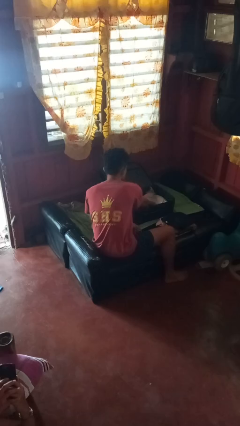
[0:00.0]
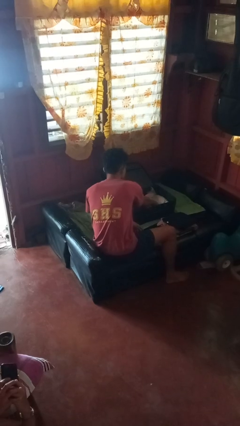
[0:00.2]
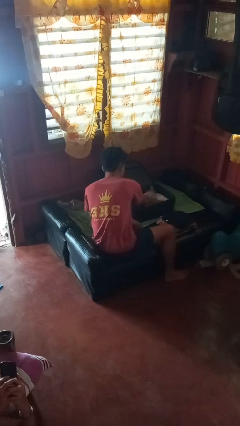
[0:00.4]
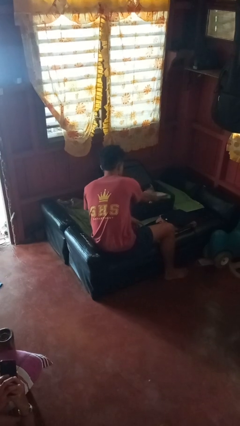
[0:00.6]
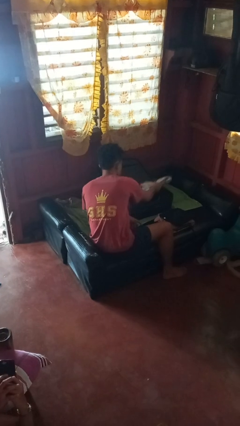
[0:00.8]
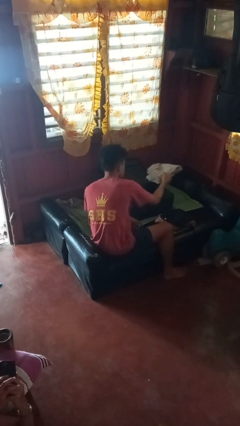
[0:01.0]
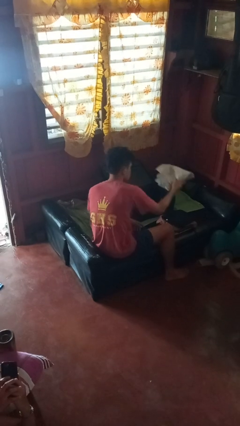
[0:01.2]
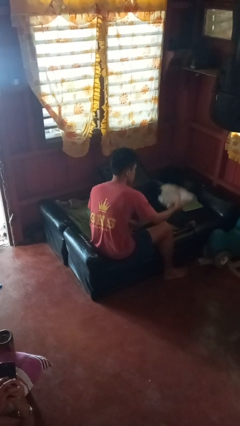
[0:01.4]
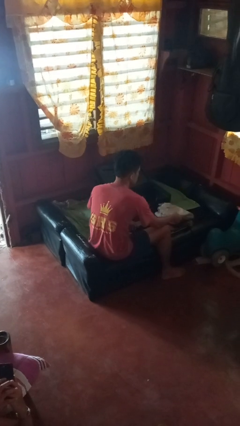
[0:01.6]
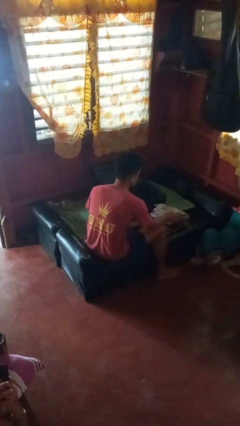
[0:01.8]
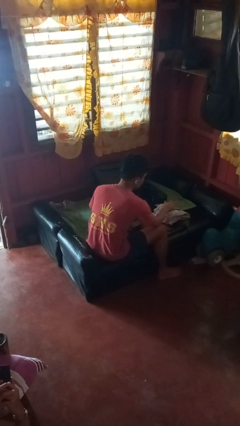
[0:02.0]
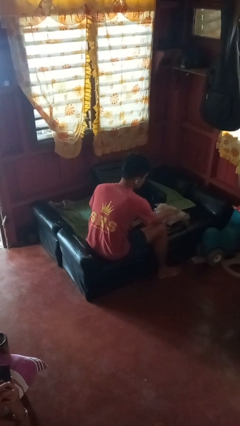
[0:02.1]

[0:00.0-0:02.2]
person unloads clothes from suitcase

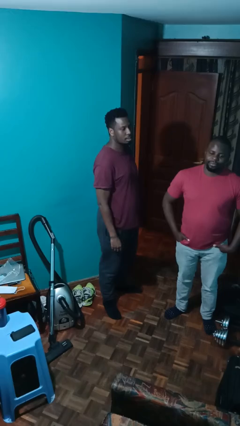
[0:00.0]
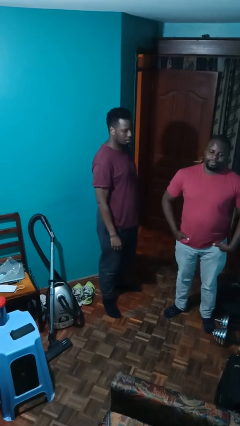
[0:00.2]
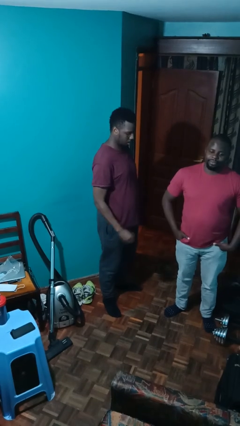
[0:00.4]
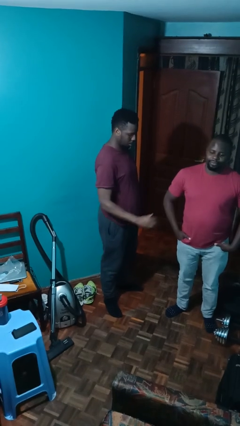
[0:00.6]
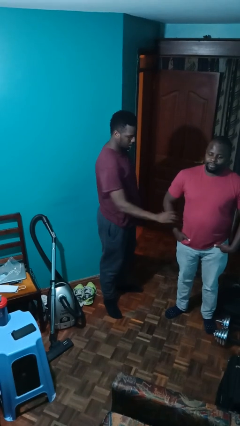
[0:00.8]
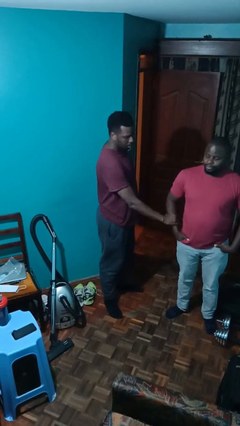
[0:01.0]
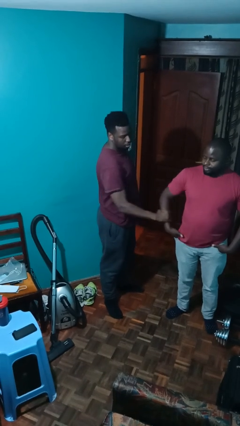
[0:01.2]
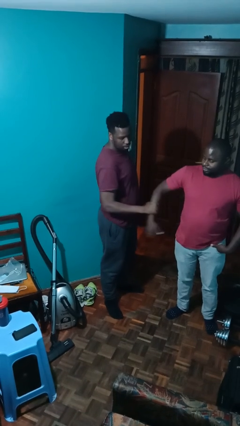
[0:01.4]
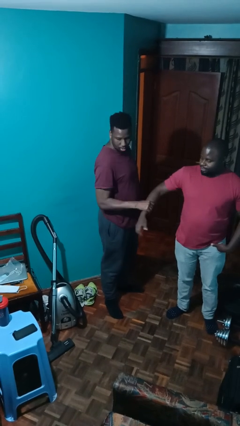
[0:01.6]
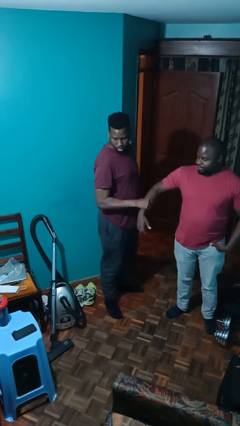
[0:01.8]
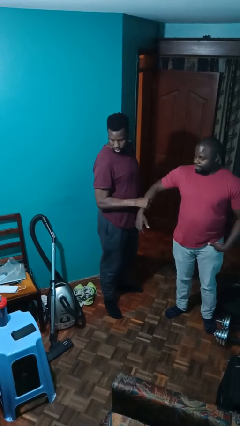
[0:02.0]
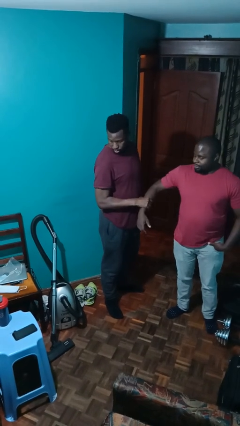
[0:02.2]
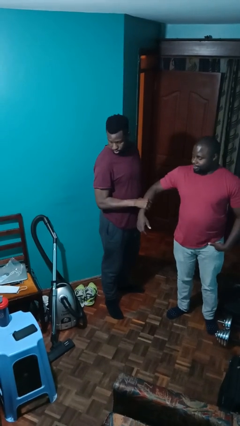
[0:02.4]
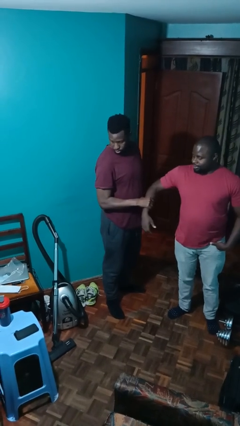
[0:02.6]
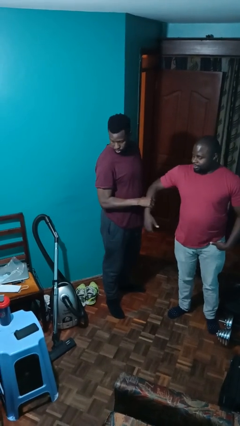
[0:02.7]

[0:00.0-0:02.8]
person grabs person by forearm

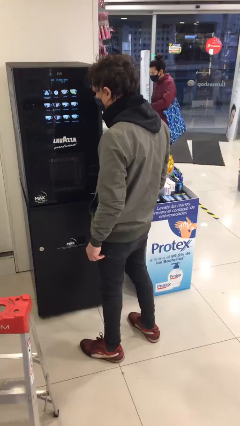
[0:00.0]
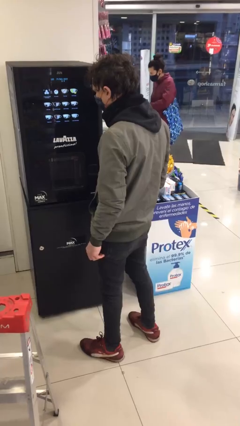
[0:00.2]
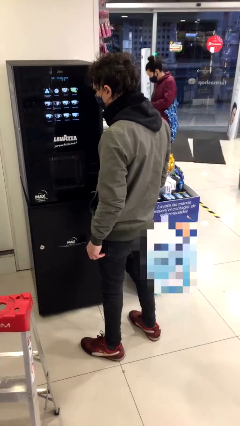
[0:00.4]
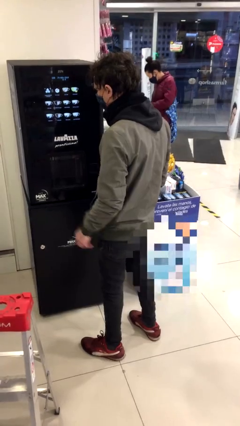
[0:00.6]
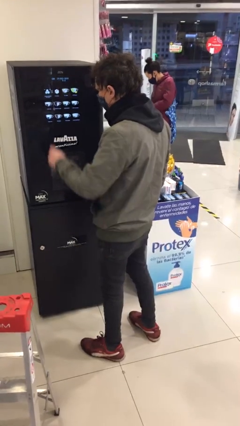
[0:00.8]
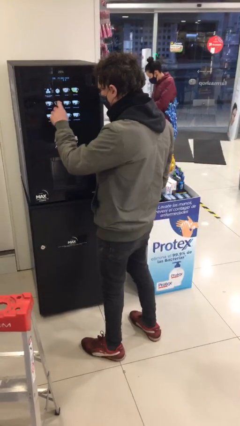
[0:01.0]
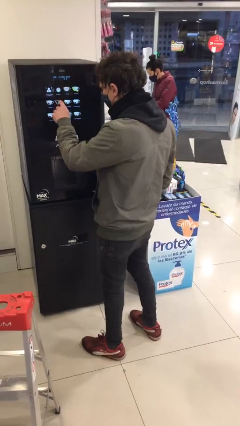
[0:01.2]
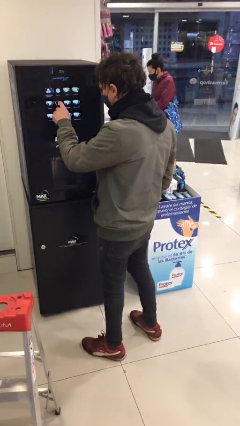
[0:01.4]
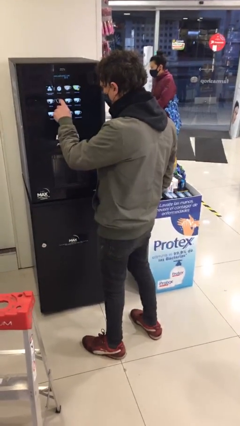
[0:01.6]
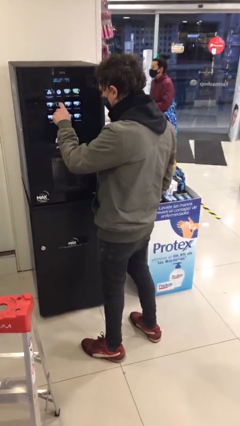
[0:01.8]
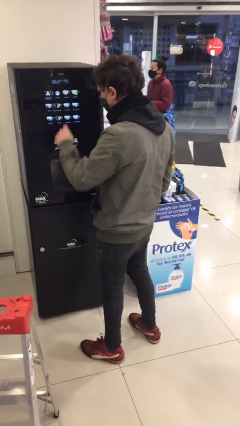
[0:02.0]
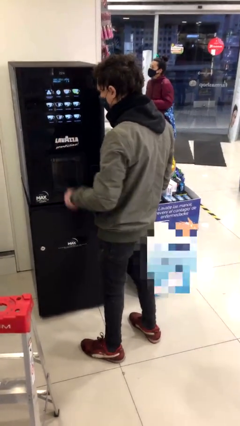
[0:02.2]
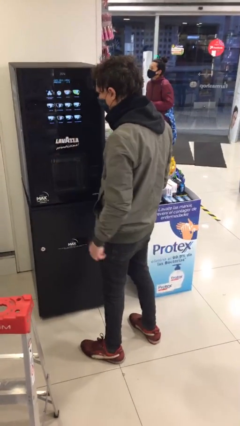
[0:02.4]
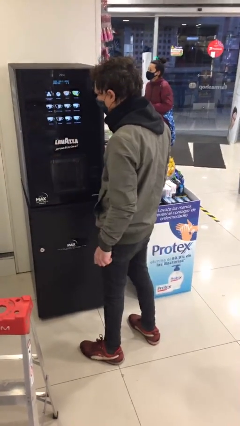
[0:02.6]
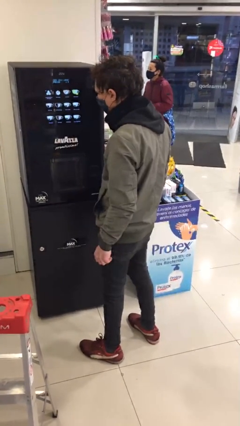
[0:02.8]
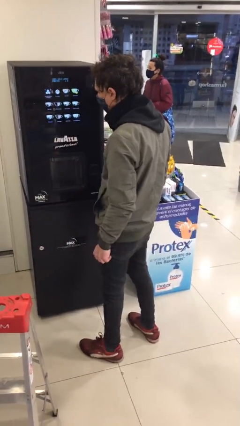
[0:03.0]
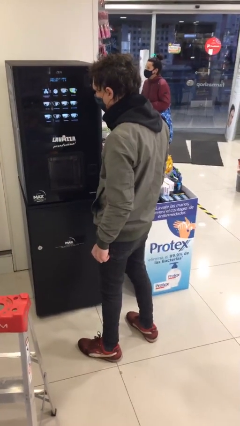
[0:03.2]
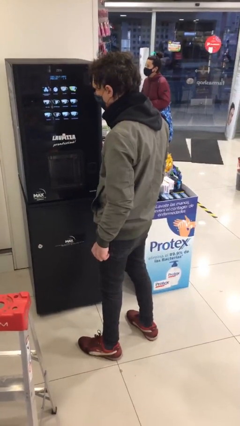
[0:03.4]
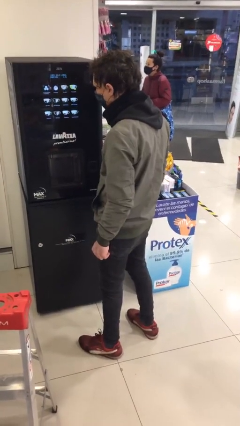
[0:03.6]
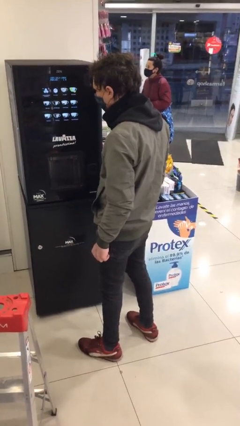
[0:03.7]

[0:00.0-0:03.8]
person purchases from machine

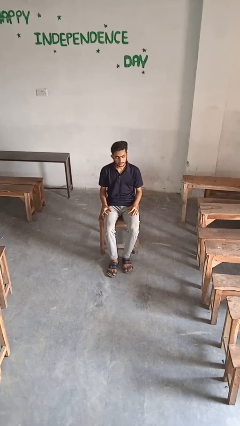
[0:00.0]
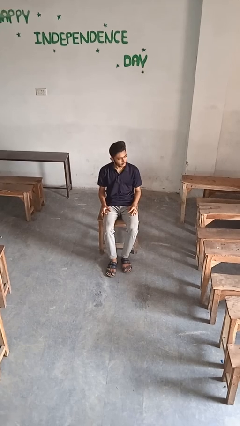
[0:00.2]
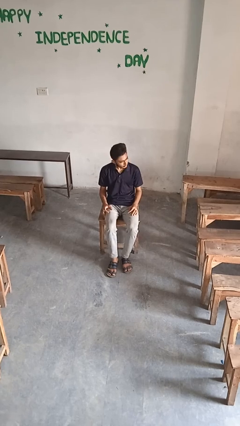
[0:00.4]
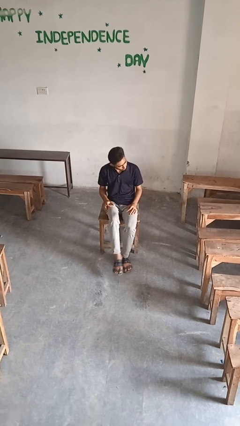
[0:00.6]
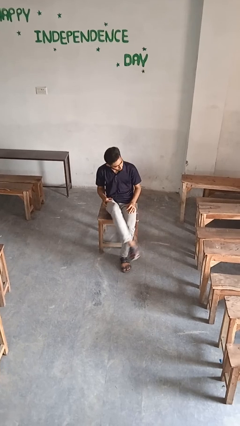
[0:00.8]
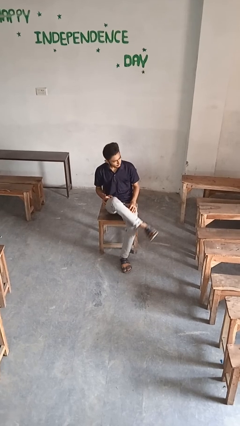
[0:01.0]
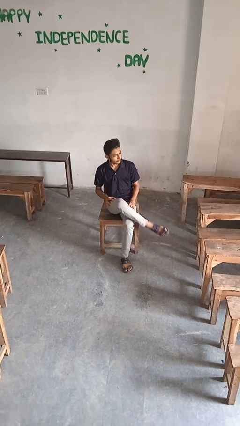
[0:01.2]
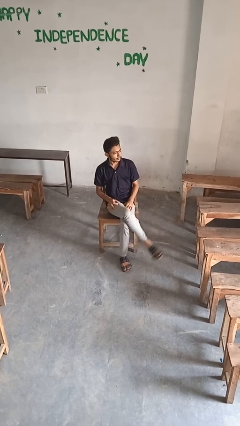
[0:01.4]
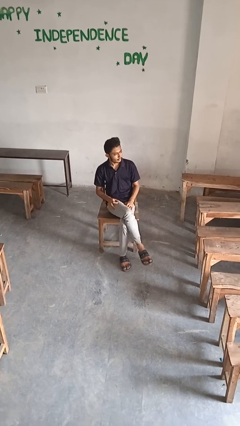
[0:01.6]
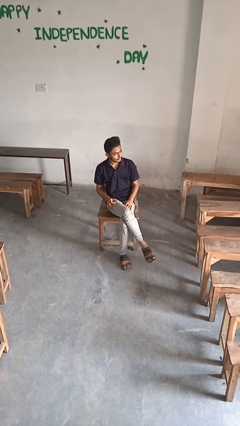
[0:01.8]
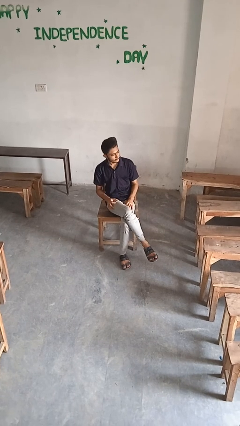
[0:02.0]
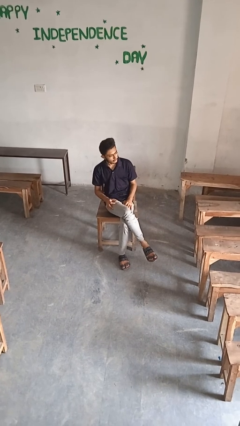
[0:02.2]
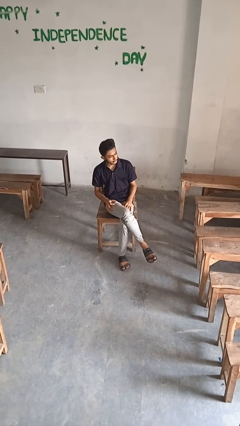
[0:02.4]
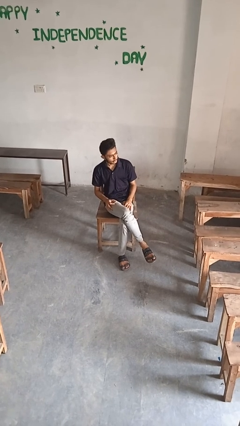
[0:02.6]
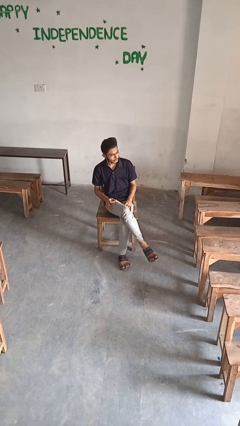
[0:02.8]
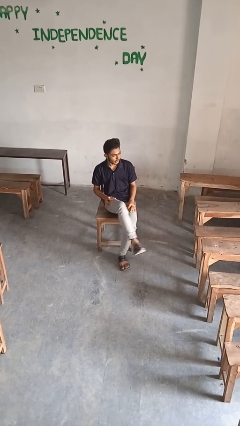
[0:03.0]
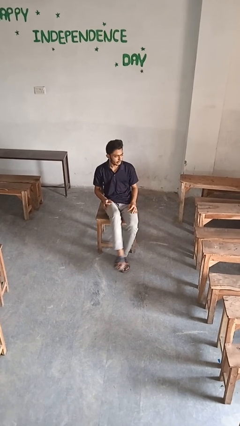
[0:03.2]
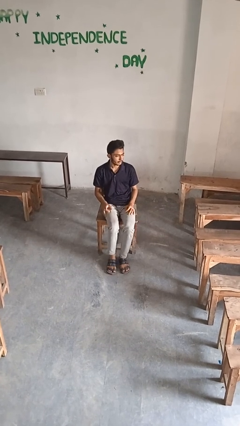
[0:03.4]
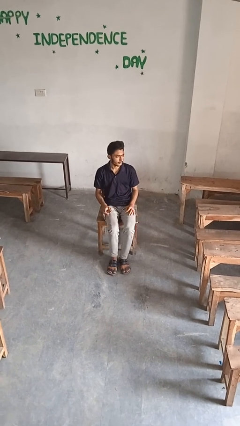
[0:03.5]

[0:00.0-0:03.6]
person crosses legs

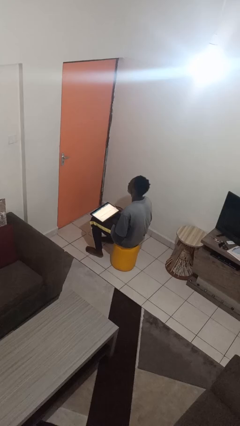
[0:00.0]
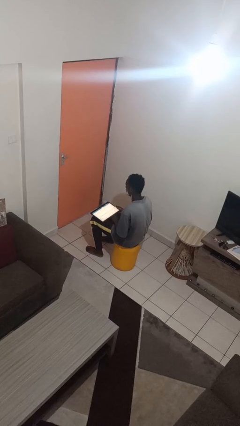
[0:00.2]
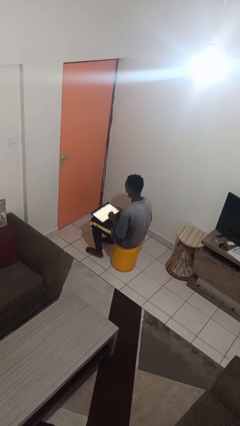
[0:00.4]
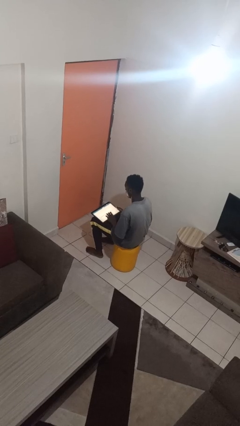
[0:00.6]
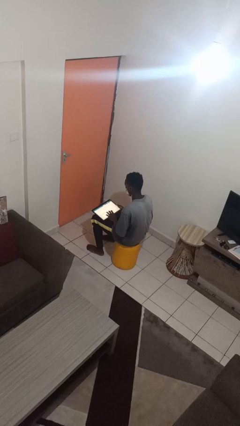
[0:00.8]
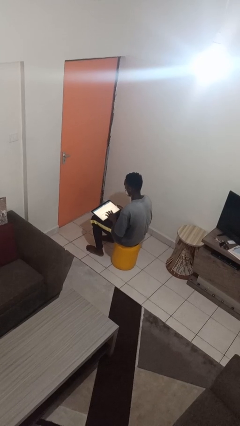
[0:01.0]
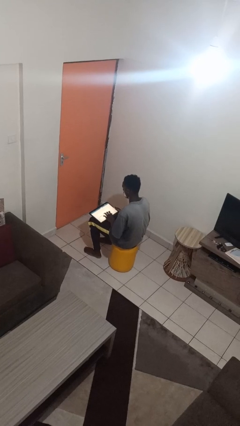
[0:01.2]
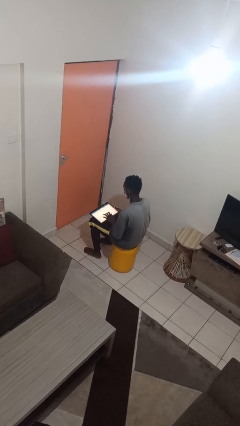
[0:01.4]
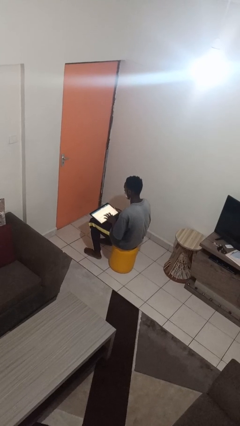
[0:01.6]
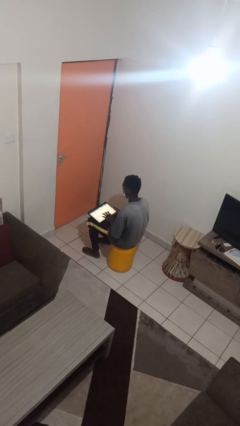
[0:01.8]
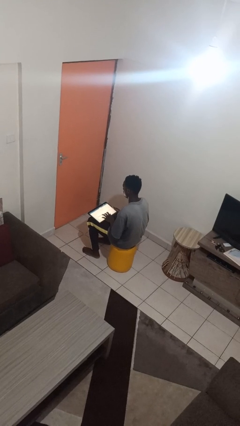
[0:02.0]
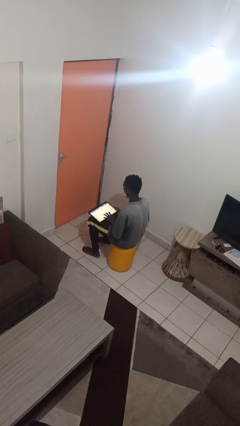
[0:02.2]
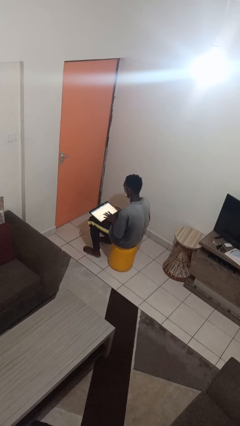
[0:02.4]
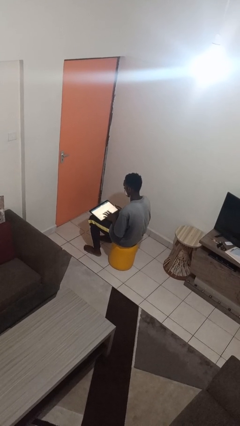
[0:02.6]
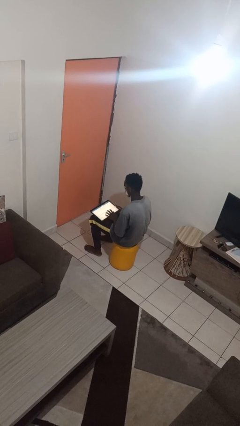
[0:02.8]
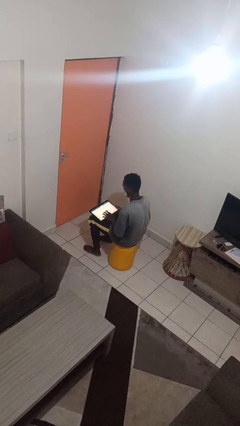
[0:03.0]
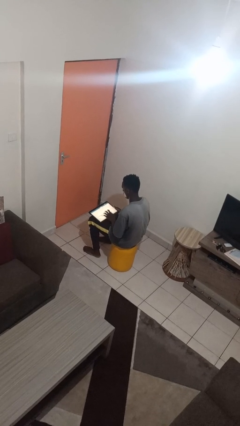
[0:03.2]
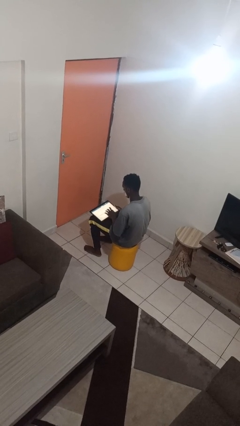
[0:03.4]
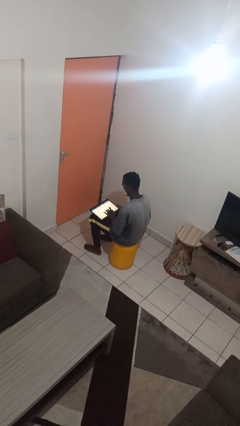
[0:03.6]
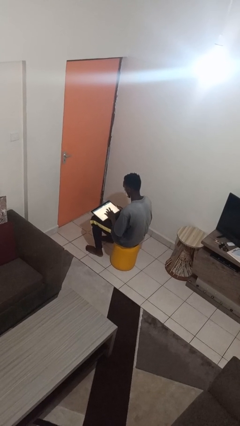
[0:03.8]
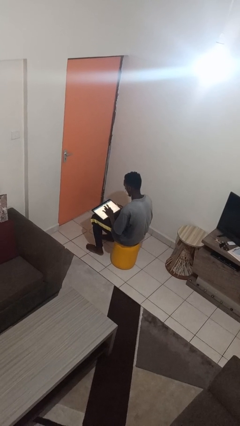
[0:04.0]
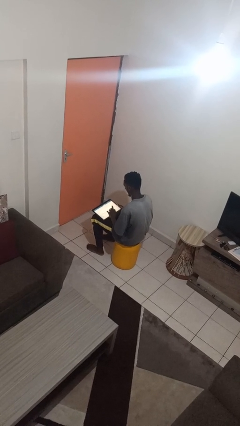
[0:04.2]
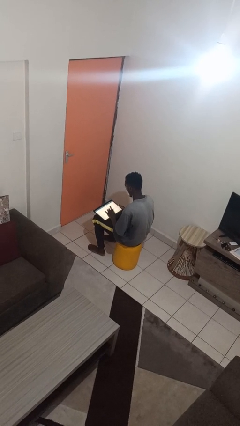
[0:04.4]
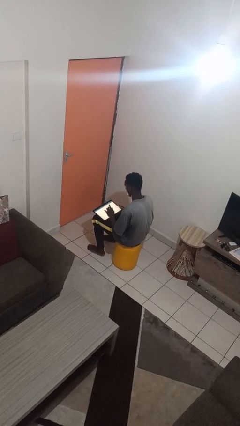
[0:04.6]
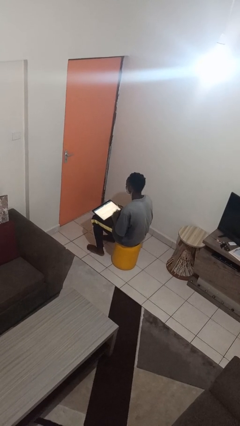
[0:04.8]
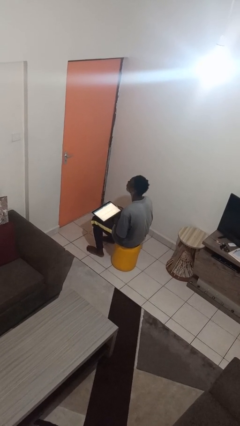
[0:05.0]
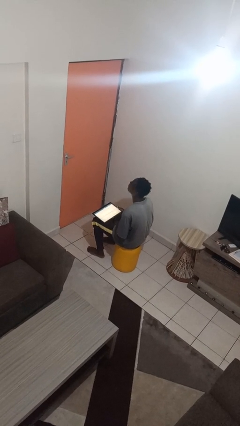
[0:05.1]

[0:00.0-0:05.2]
person interacts with tablet
